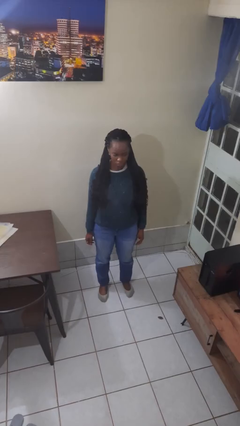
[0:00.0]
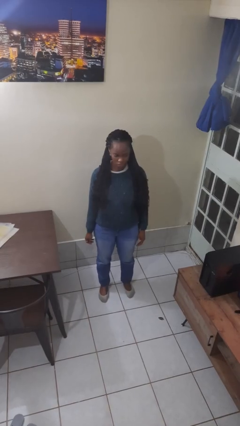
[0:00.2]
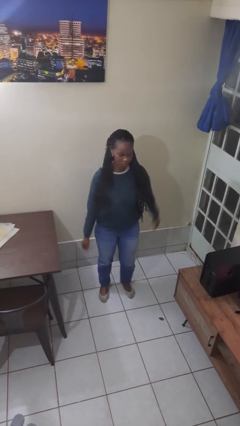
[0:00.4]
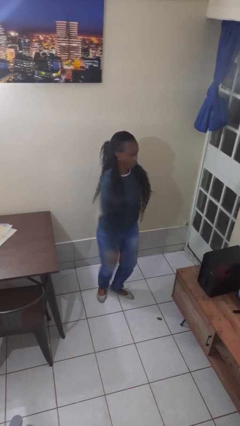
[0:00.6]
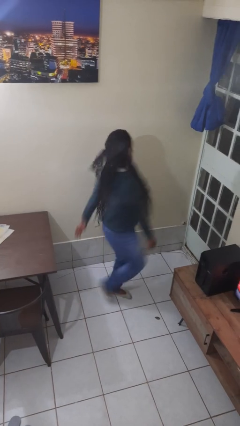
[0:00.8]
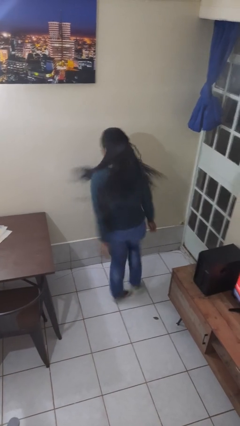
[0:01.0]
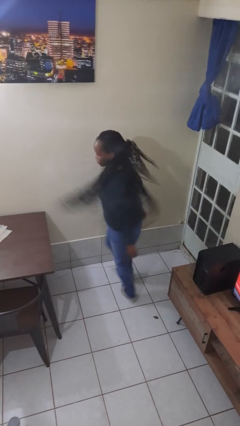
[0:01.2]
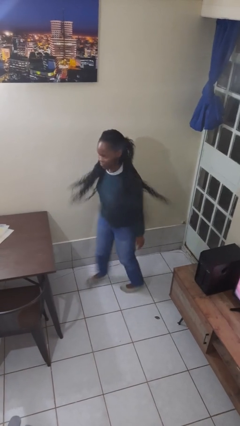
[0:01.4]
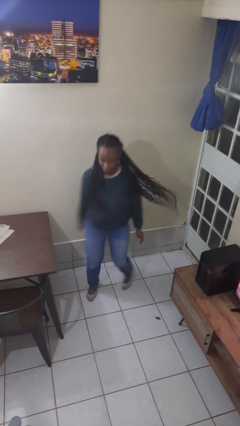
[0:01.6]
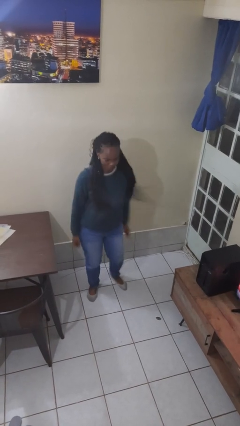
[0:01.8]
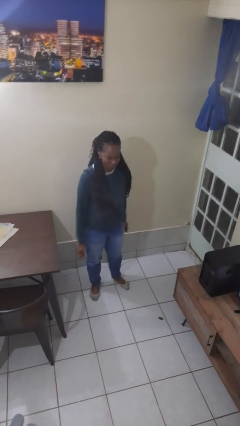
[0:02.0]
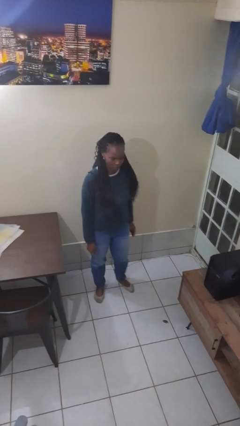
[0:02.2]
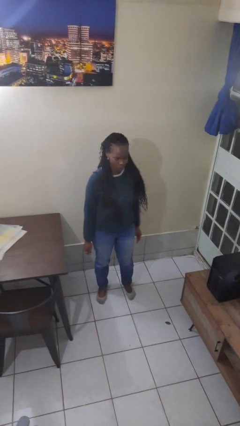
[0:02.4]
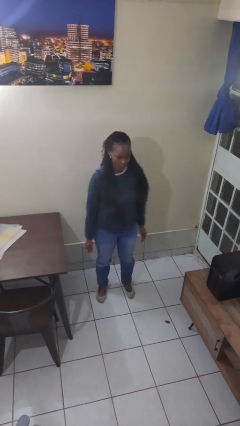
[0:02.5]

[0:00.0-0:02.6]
person twirls

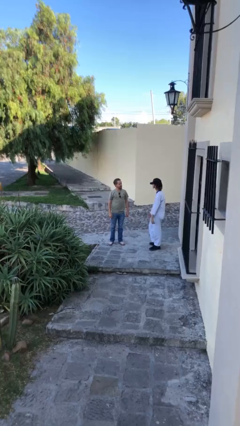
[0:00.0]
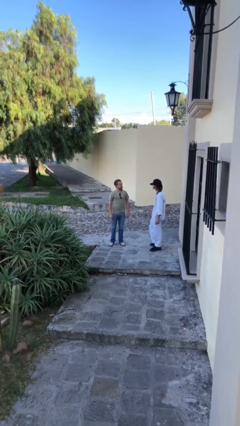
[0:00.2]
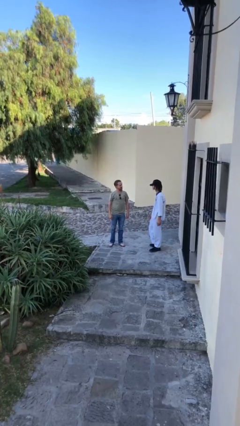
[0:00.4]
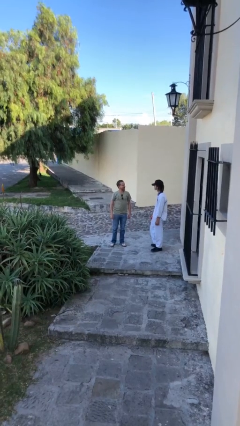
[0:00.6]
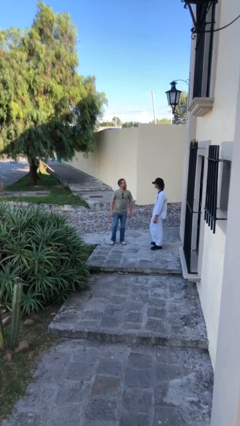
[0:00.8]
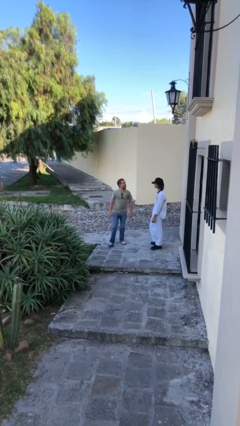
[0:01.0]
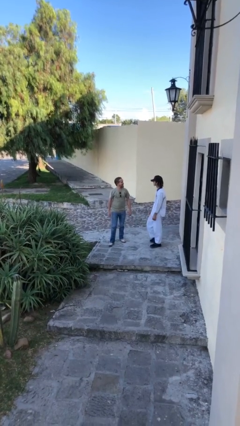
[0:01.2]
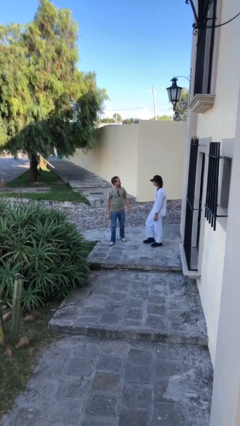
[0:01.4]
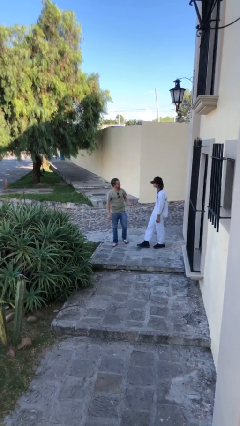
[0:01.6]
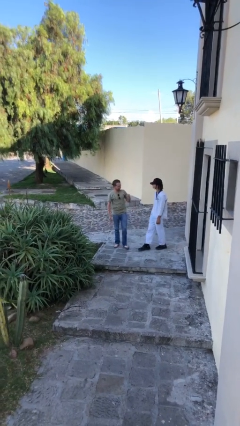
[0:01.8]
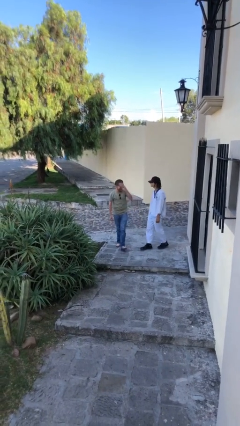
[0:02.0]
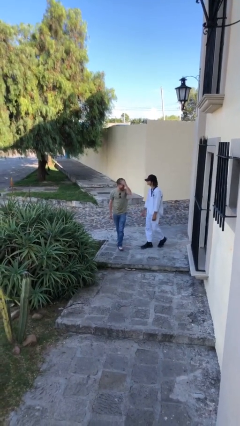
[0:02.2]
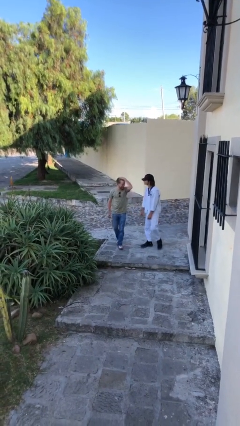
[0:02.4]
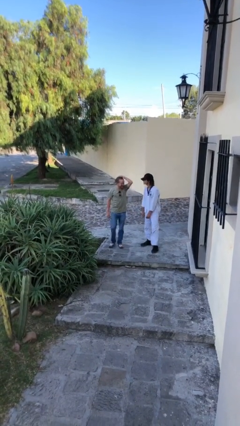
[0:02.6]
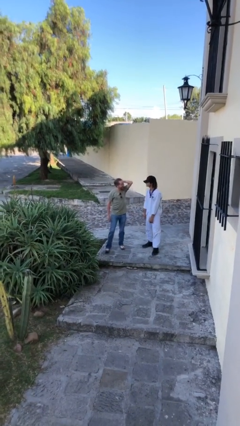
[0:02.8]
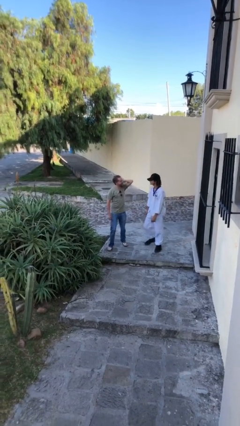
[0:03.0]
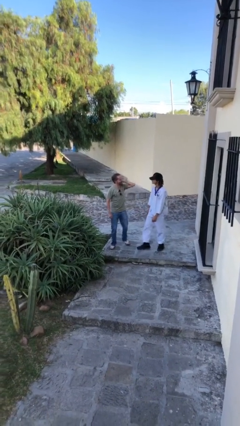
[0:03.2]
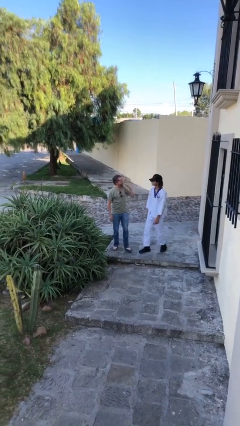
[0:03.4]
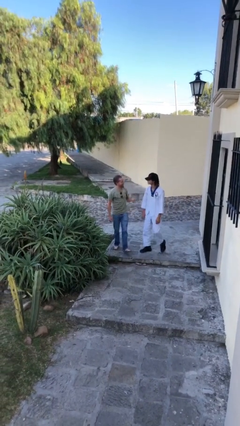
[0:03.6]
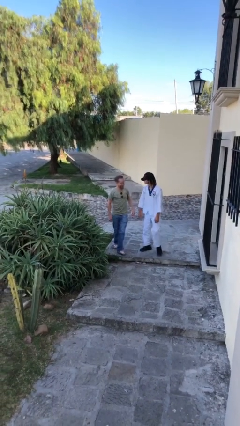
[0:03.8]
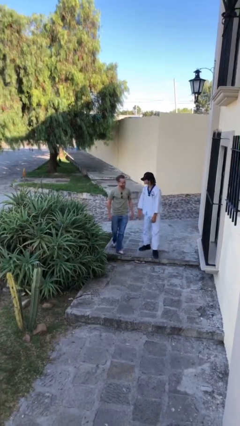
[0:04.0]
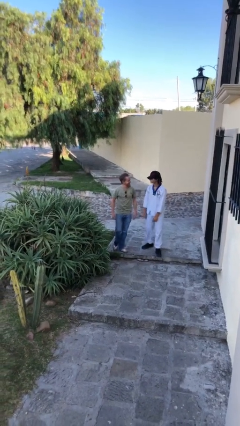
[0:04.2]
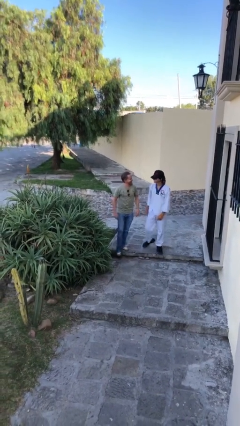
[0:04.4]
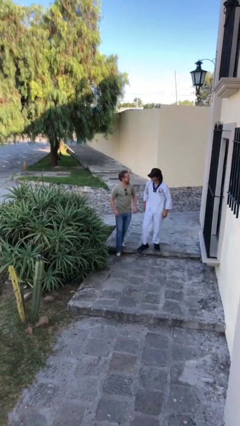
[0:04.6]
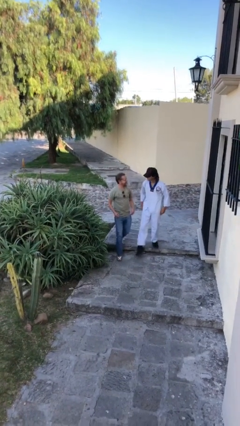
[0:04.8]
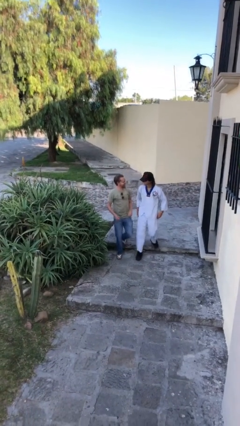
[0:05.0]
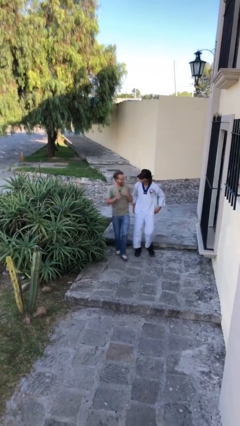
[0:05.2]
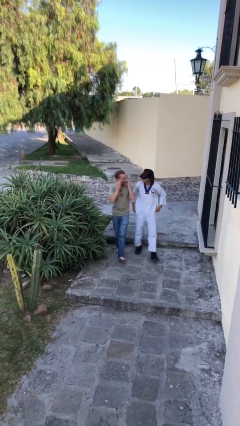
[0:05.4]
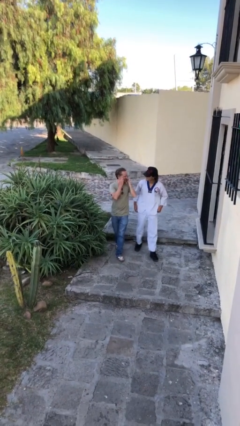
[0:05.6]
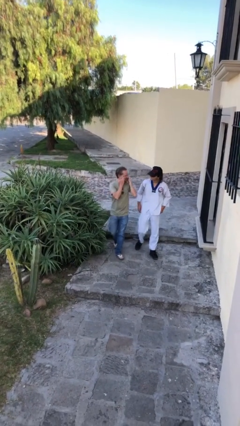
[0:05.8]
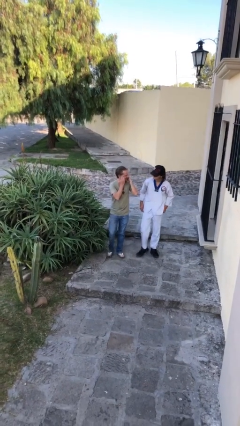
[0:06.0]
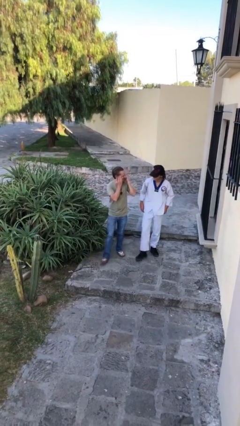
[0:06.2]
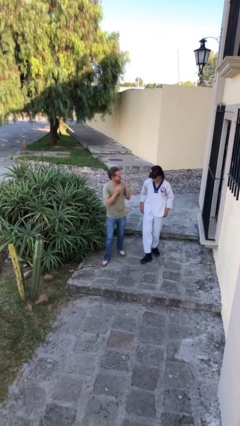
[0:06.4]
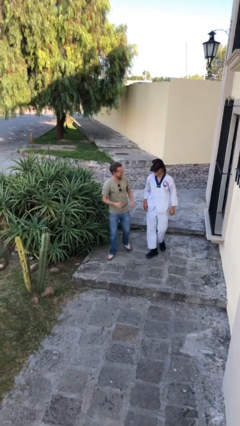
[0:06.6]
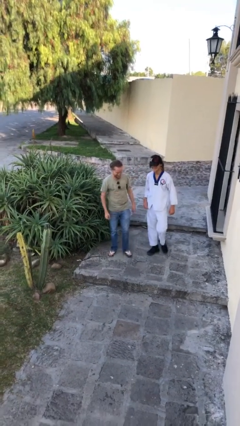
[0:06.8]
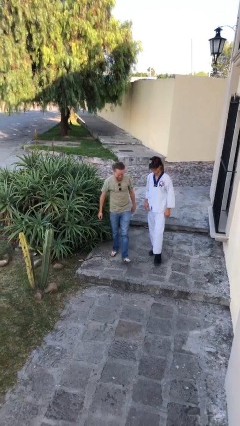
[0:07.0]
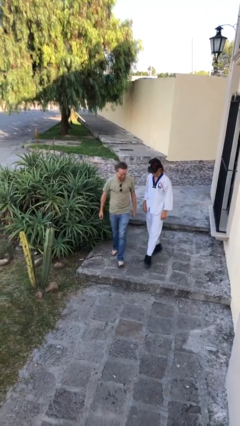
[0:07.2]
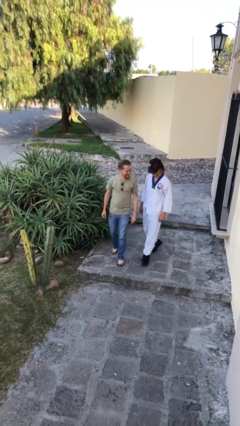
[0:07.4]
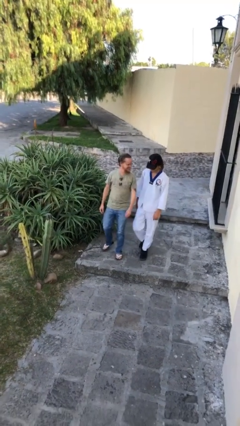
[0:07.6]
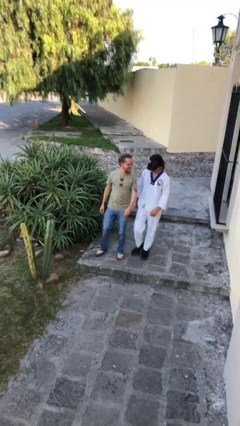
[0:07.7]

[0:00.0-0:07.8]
person talks to person

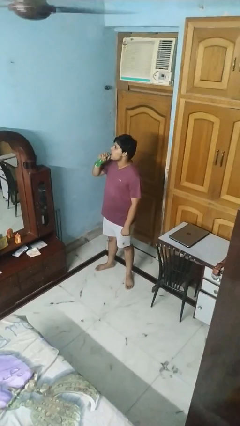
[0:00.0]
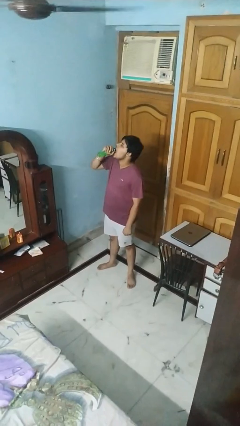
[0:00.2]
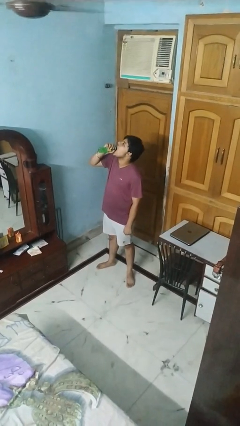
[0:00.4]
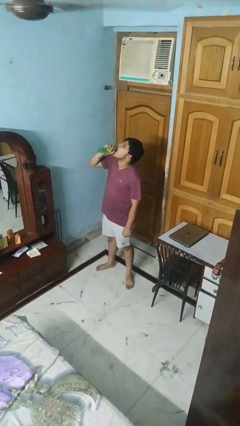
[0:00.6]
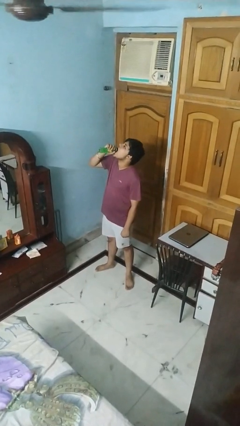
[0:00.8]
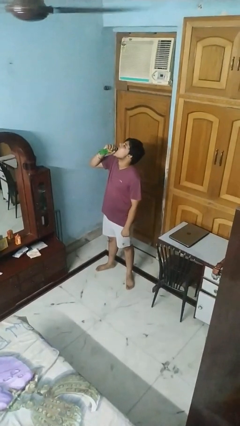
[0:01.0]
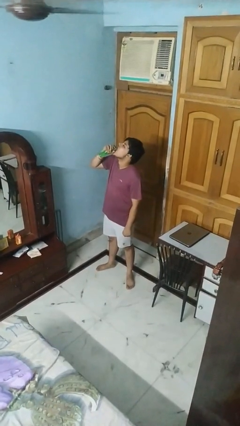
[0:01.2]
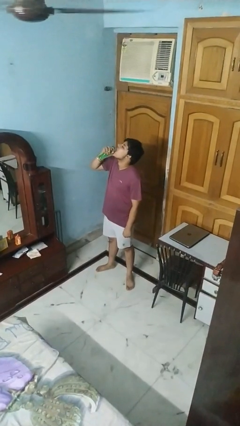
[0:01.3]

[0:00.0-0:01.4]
person drinks from bottle

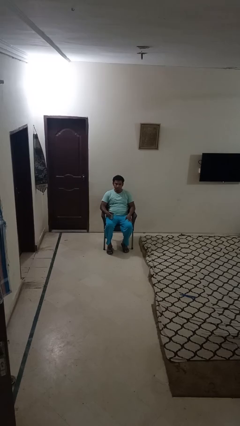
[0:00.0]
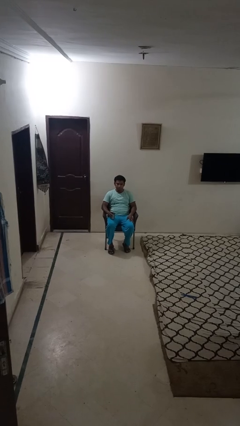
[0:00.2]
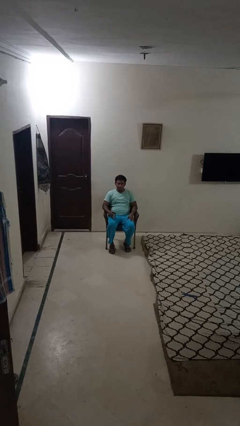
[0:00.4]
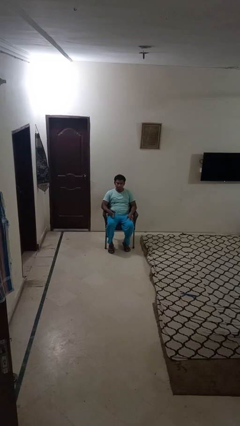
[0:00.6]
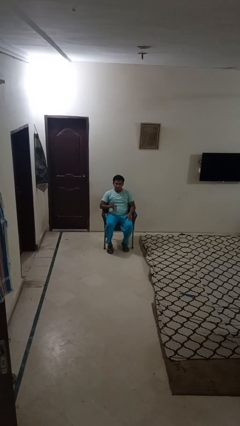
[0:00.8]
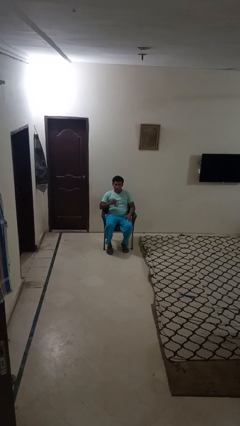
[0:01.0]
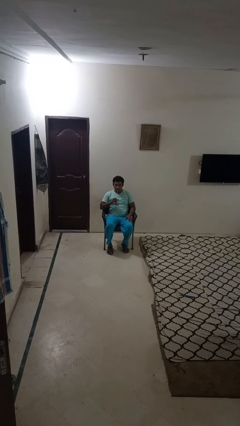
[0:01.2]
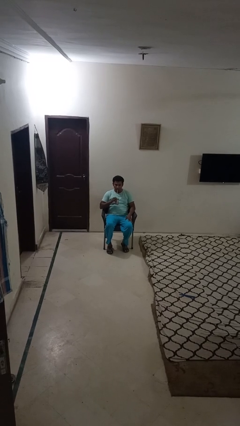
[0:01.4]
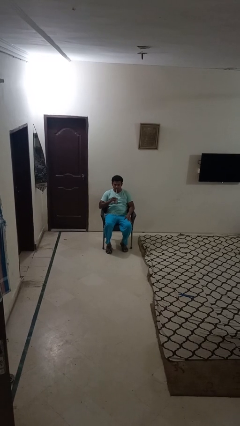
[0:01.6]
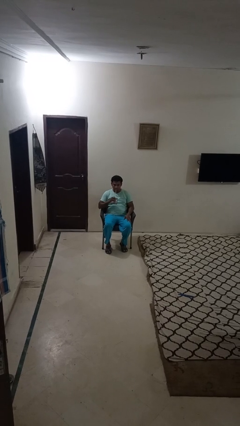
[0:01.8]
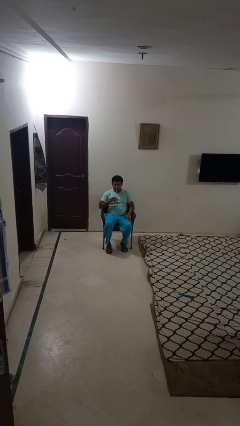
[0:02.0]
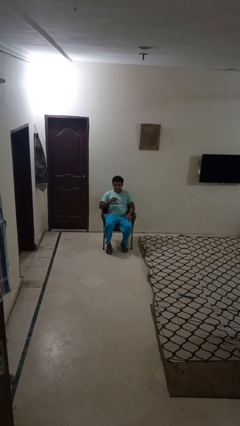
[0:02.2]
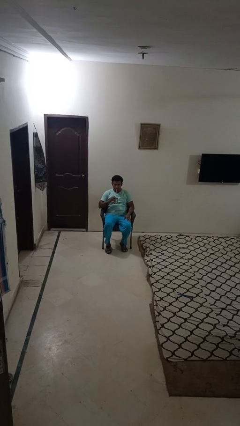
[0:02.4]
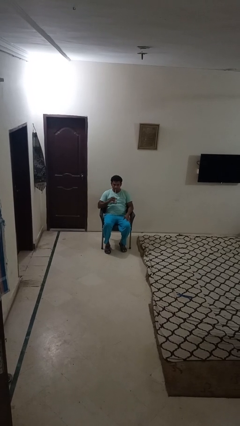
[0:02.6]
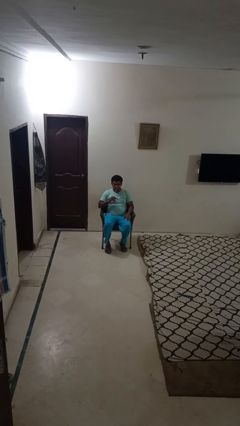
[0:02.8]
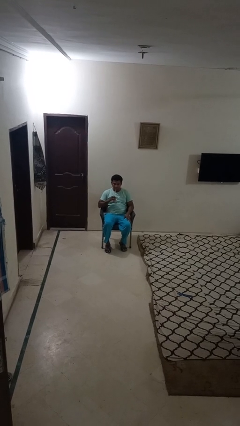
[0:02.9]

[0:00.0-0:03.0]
person drinks from straw

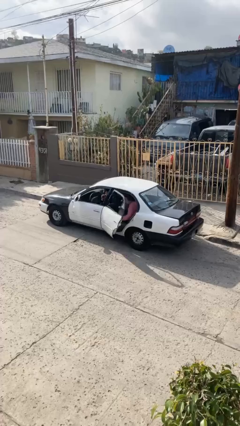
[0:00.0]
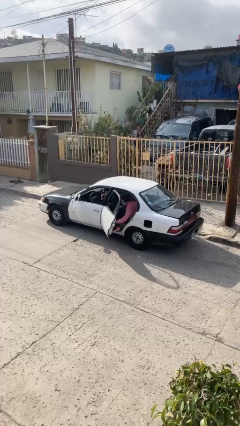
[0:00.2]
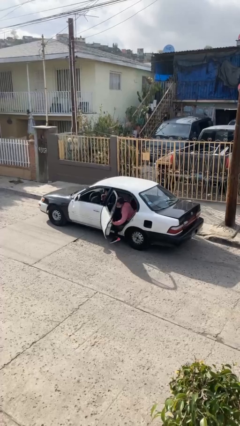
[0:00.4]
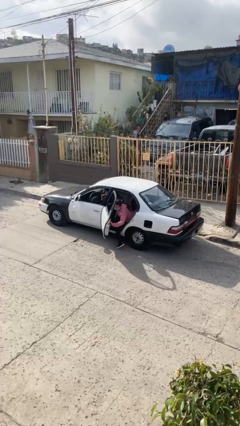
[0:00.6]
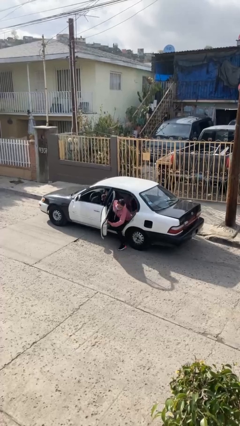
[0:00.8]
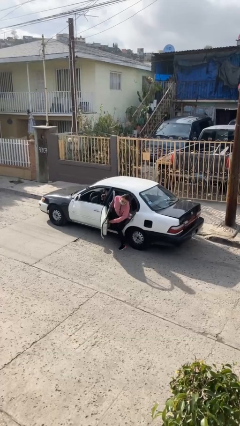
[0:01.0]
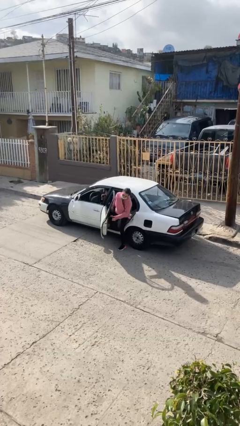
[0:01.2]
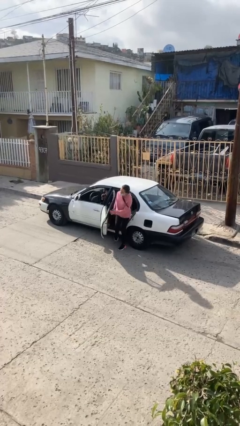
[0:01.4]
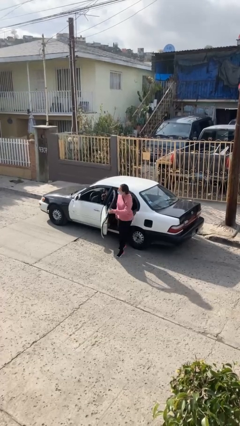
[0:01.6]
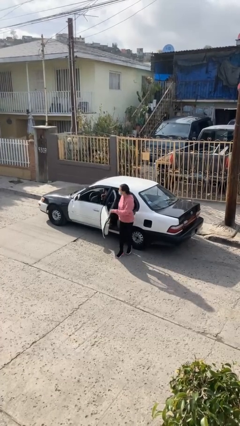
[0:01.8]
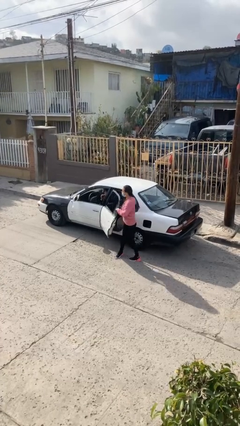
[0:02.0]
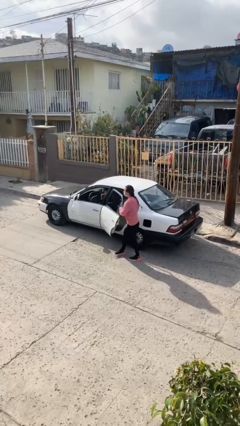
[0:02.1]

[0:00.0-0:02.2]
car drops off person

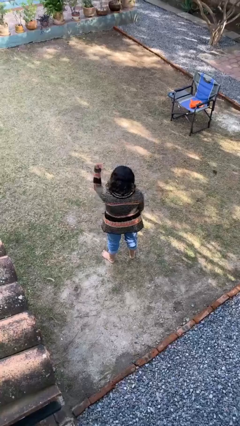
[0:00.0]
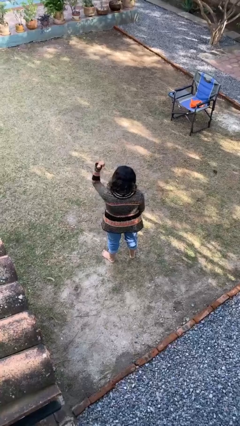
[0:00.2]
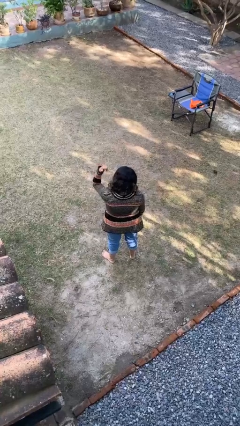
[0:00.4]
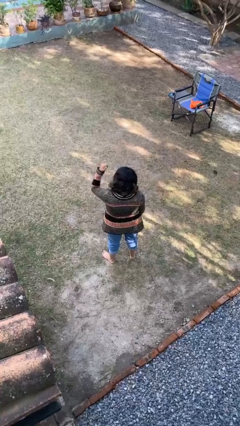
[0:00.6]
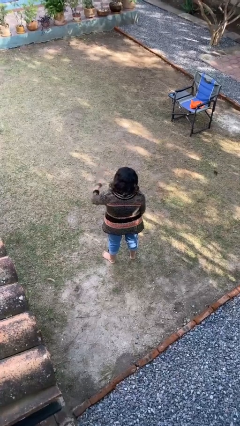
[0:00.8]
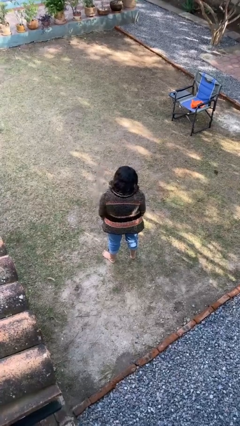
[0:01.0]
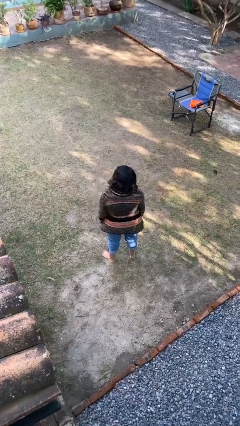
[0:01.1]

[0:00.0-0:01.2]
person gestures hang loose
